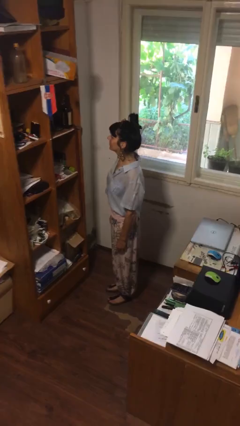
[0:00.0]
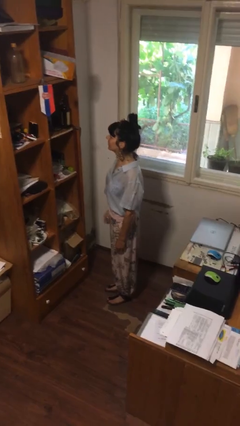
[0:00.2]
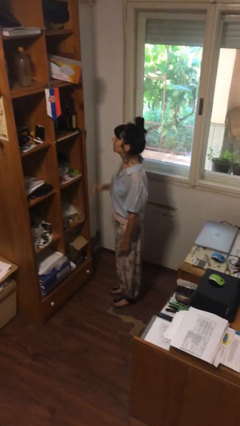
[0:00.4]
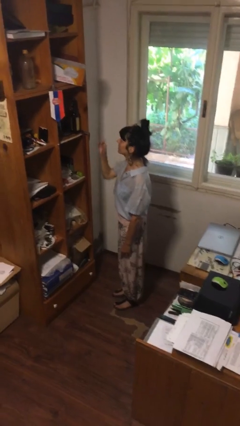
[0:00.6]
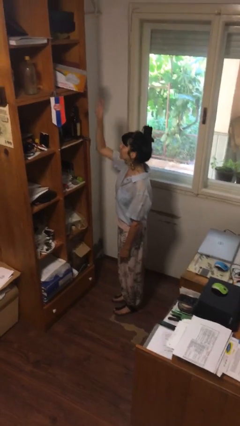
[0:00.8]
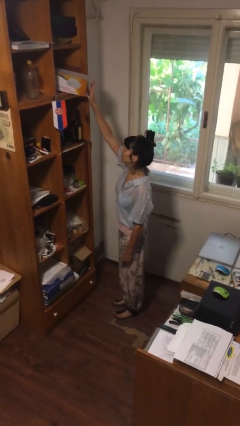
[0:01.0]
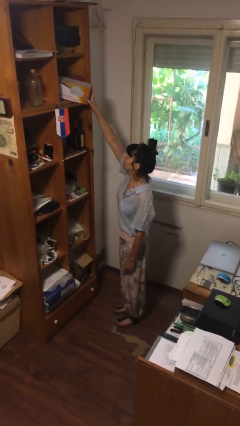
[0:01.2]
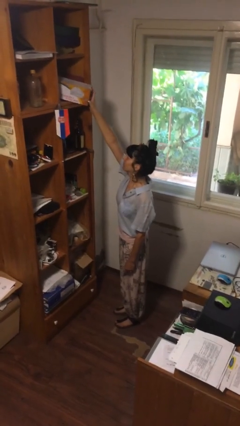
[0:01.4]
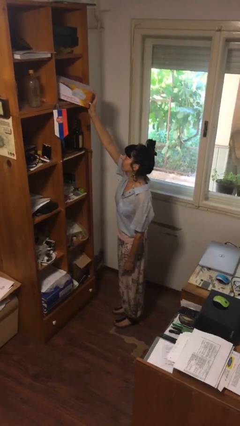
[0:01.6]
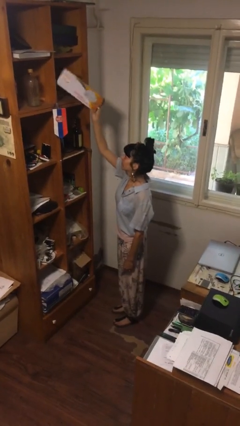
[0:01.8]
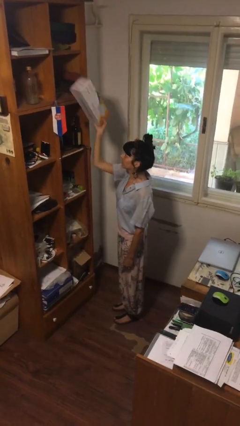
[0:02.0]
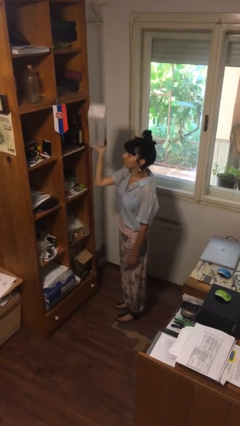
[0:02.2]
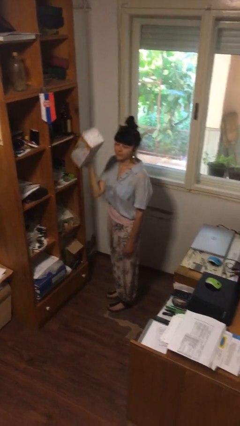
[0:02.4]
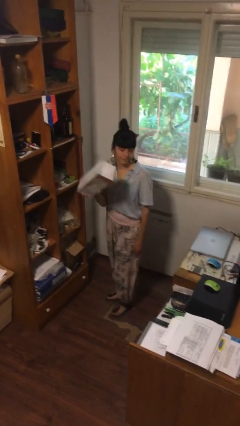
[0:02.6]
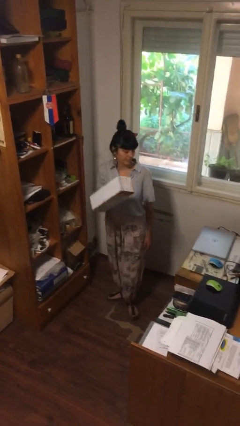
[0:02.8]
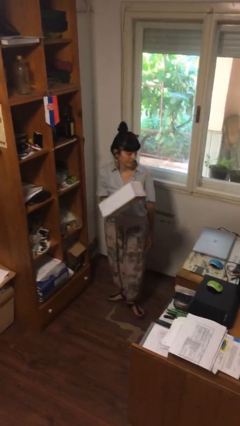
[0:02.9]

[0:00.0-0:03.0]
person picks up object from shelf

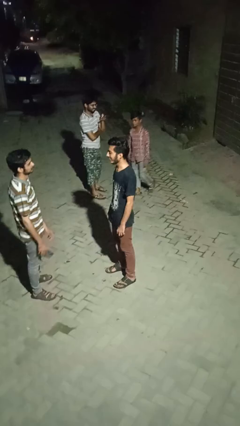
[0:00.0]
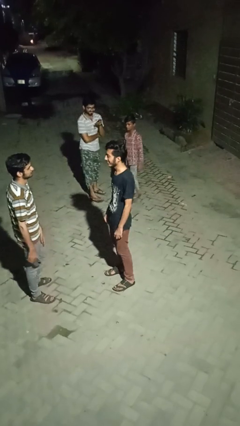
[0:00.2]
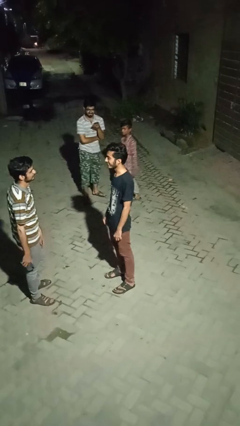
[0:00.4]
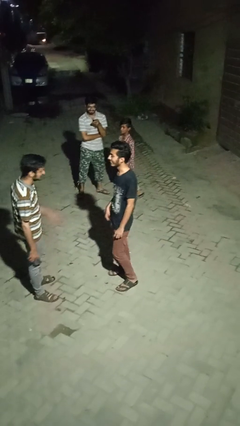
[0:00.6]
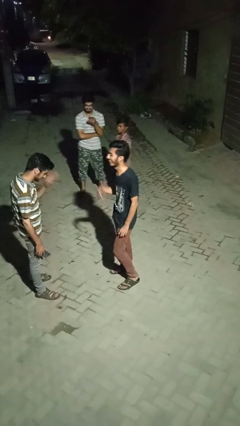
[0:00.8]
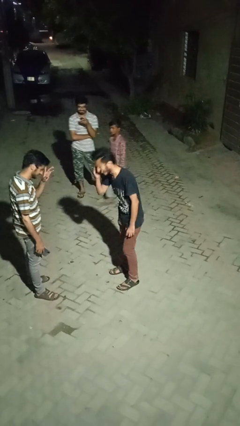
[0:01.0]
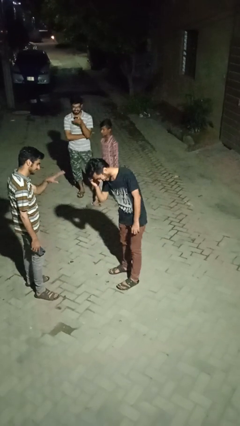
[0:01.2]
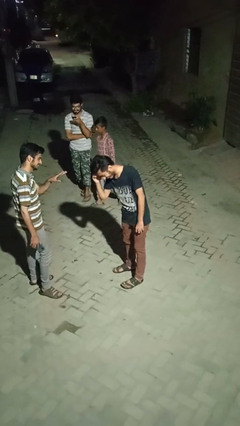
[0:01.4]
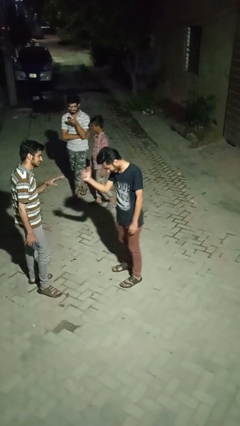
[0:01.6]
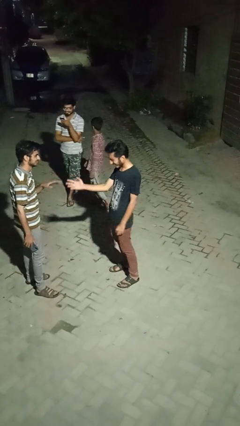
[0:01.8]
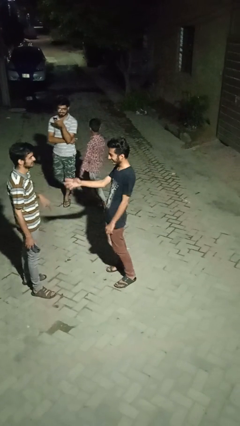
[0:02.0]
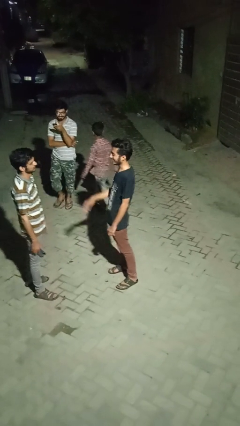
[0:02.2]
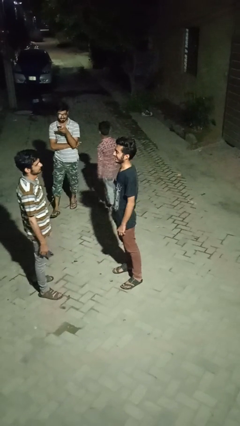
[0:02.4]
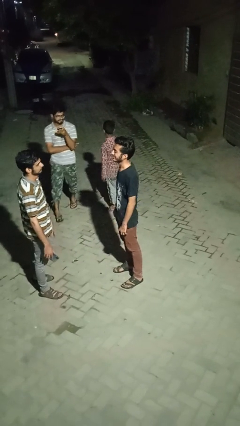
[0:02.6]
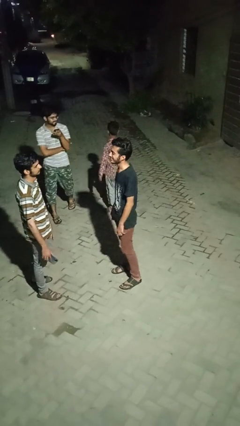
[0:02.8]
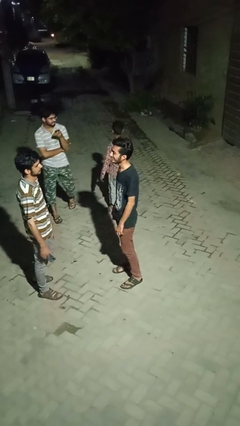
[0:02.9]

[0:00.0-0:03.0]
person laughs with person

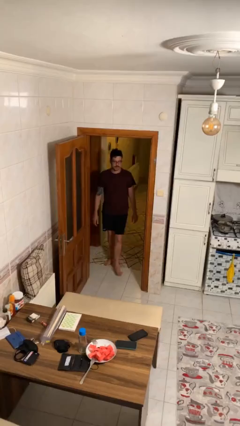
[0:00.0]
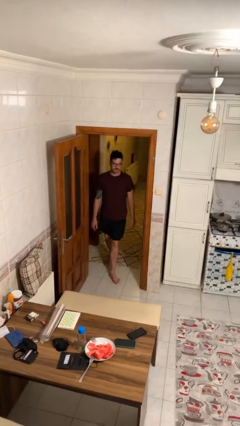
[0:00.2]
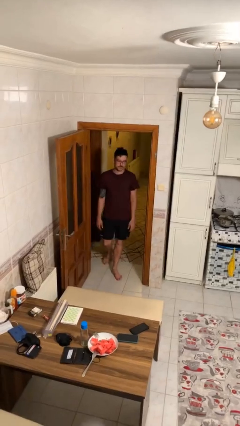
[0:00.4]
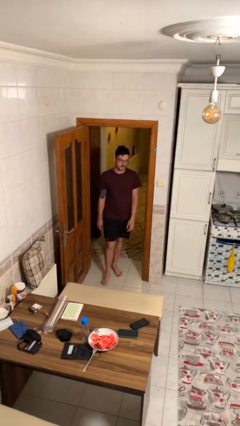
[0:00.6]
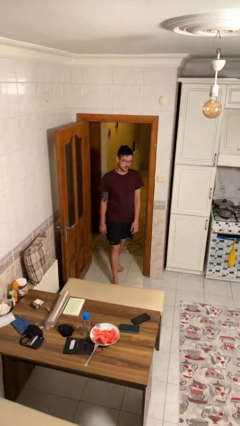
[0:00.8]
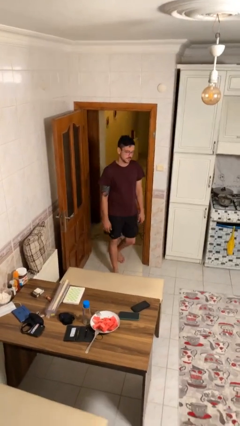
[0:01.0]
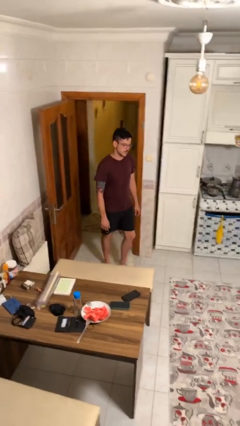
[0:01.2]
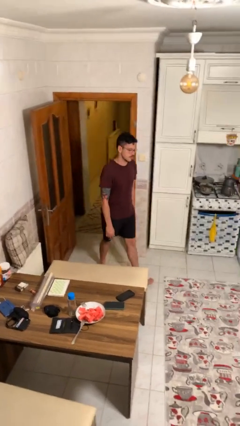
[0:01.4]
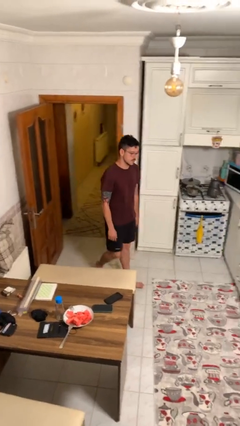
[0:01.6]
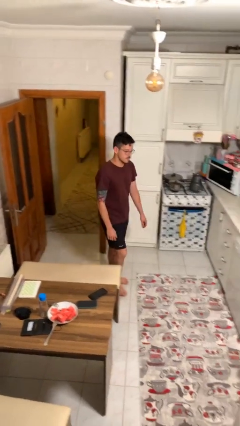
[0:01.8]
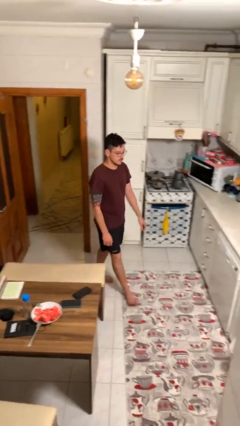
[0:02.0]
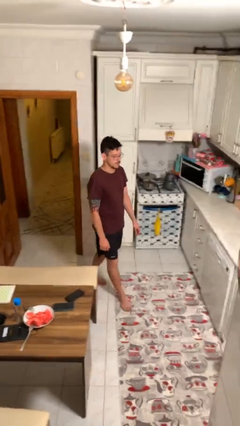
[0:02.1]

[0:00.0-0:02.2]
person enters scene through structure

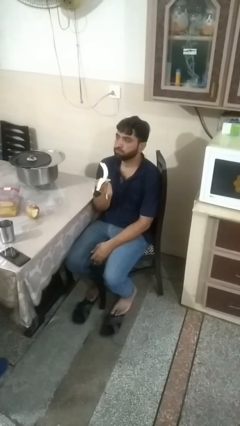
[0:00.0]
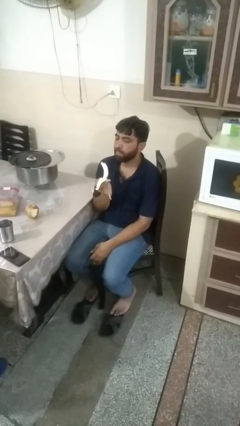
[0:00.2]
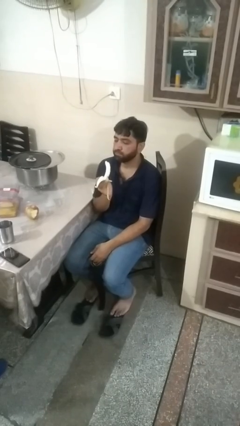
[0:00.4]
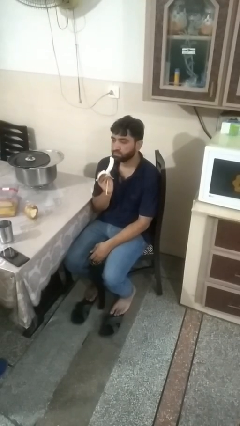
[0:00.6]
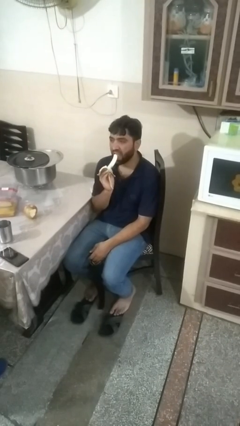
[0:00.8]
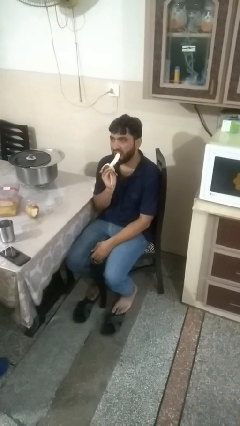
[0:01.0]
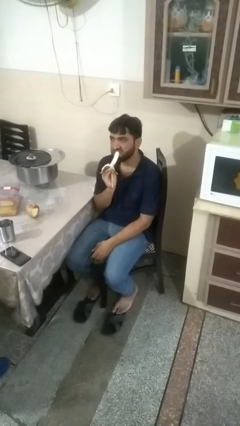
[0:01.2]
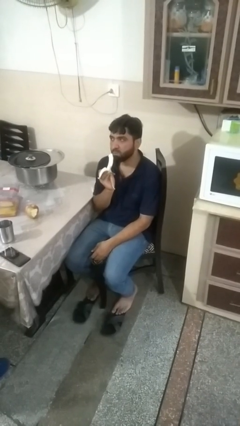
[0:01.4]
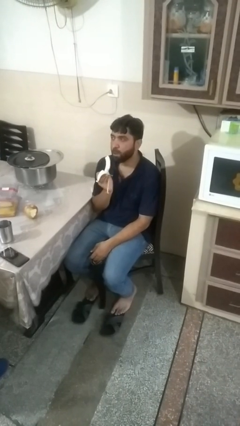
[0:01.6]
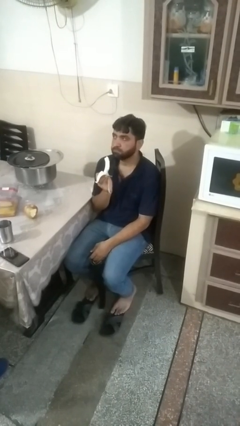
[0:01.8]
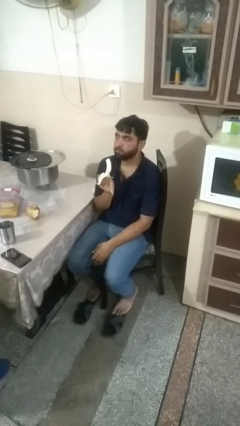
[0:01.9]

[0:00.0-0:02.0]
person eats banana

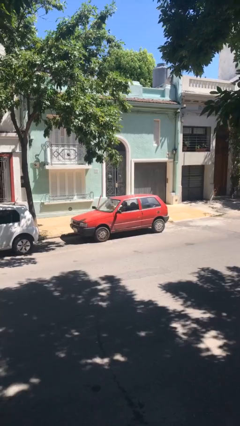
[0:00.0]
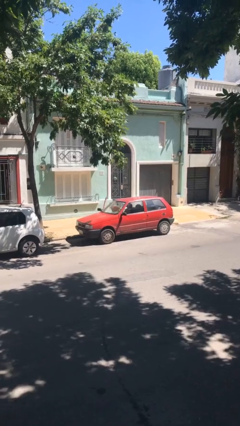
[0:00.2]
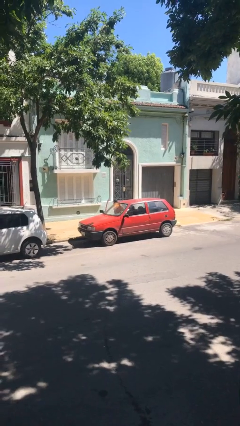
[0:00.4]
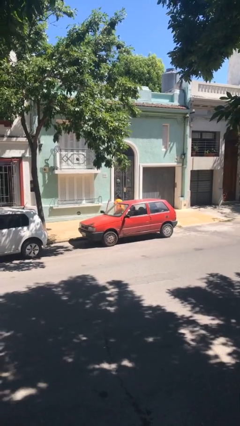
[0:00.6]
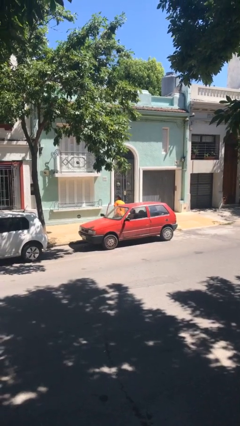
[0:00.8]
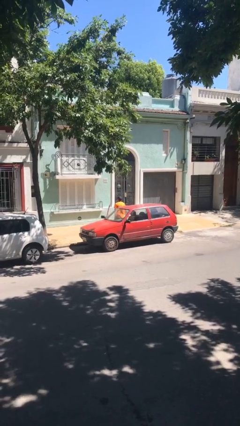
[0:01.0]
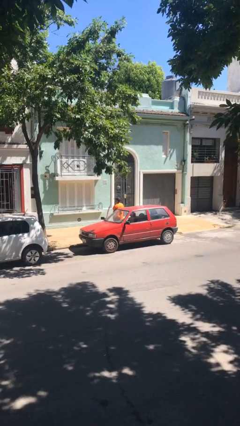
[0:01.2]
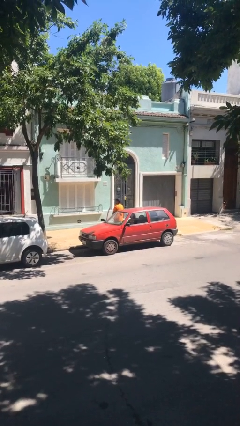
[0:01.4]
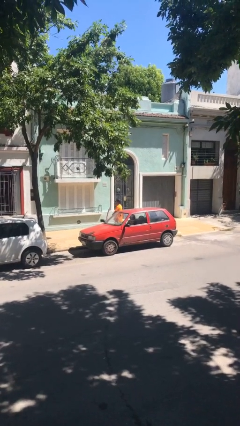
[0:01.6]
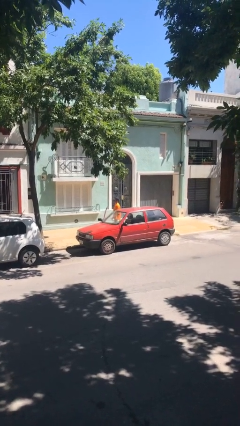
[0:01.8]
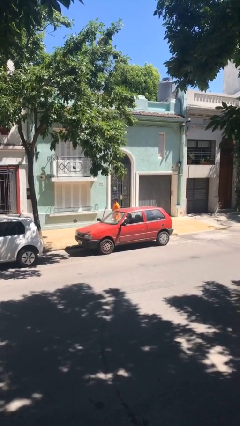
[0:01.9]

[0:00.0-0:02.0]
person exits car

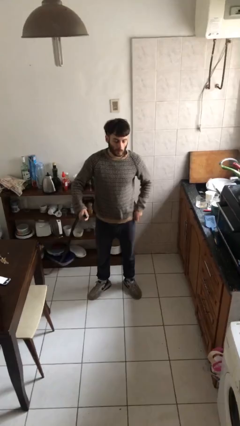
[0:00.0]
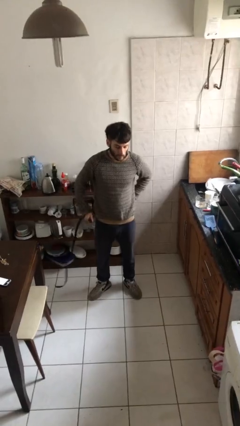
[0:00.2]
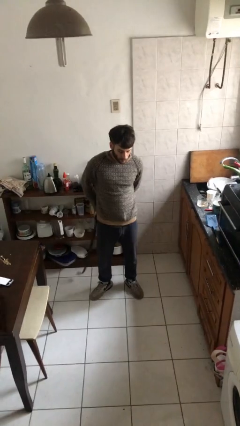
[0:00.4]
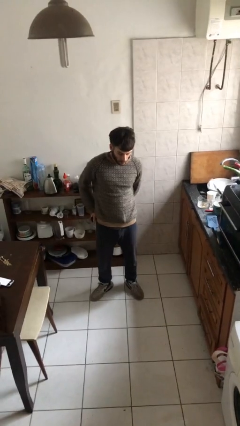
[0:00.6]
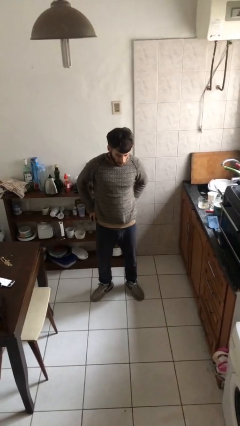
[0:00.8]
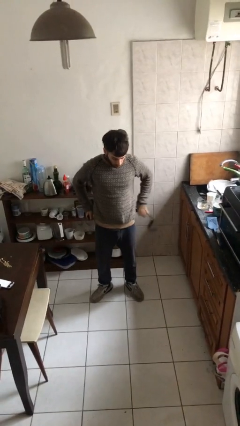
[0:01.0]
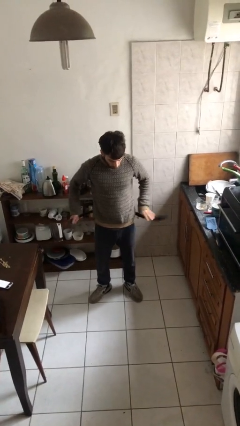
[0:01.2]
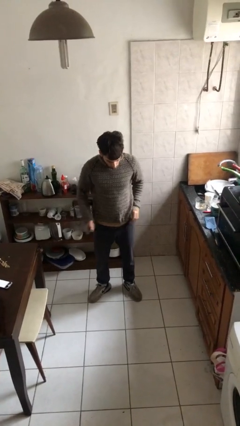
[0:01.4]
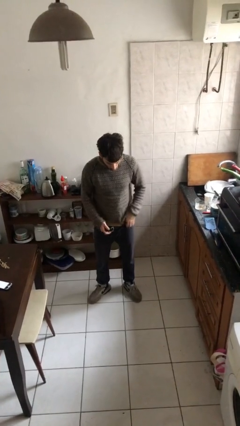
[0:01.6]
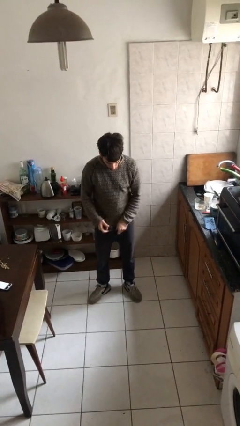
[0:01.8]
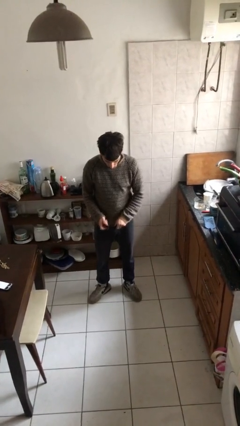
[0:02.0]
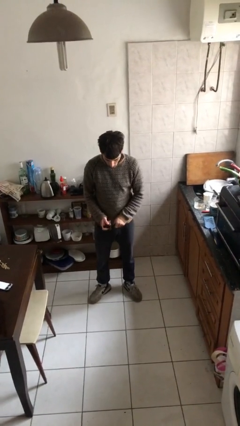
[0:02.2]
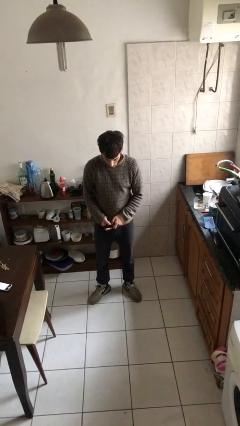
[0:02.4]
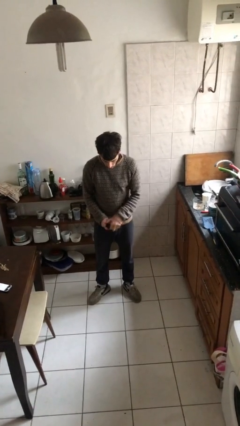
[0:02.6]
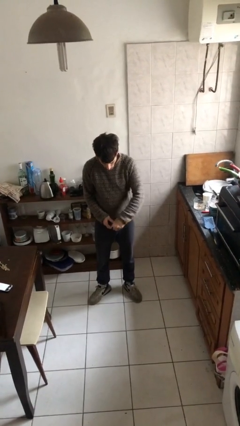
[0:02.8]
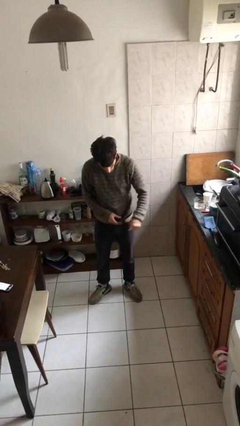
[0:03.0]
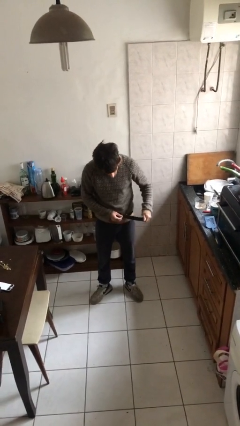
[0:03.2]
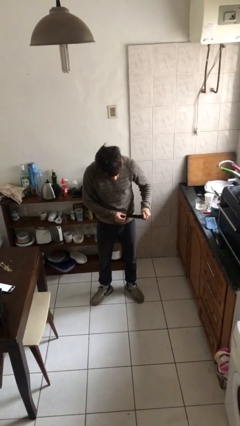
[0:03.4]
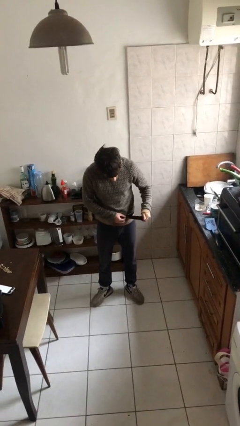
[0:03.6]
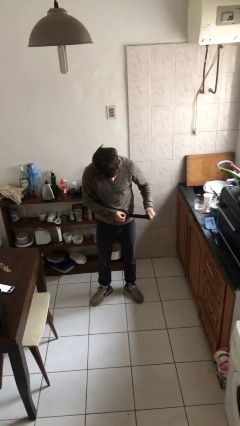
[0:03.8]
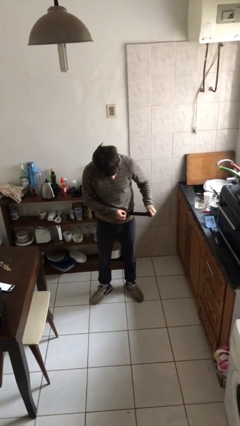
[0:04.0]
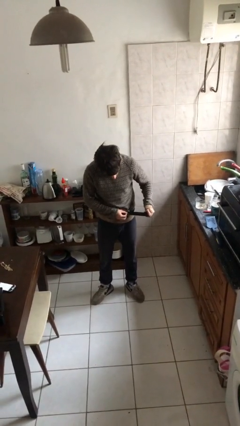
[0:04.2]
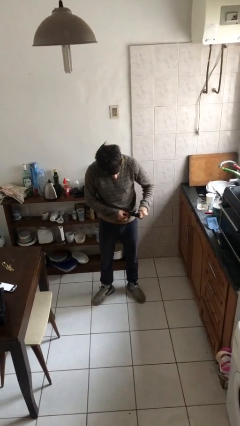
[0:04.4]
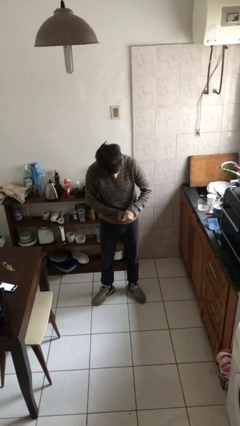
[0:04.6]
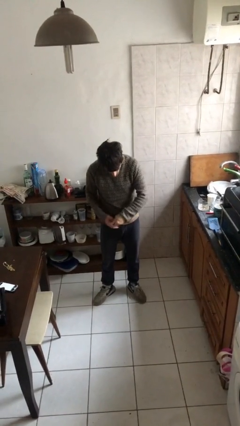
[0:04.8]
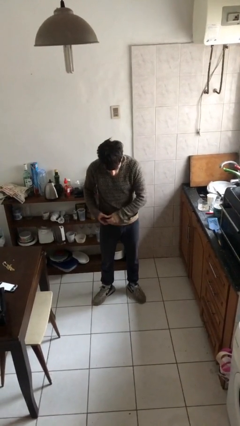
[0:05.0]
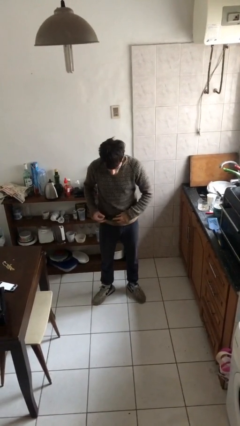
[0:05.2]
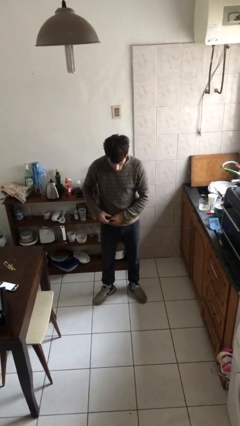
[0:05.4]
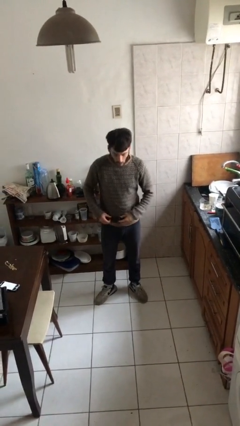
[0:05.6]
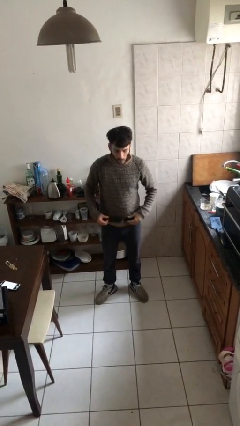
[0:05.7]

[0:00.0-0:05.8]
person puts on belt
